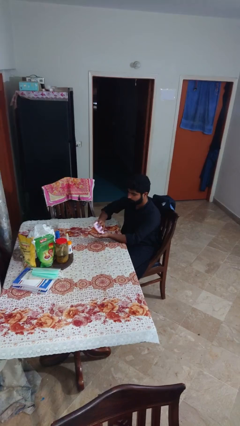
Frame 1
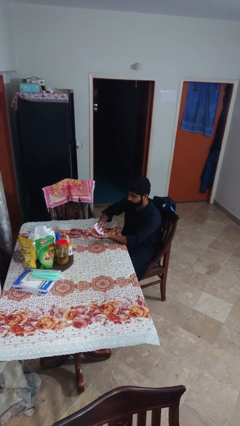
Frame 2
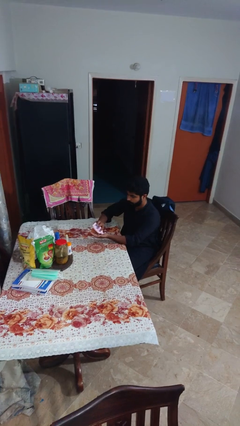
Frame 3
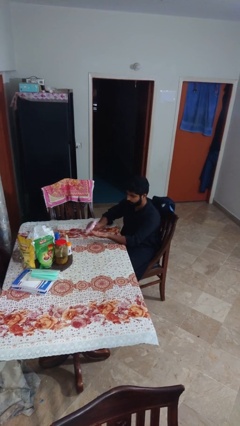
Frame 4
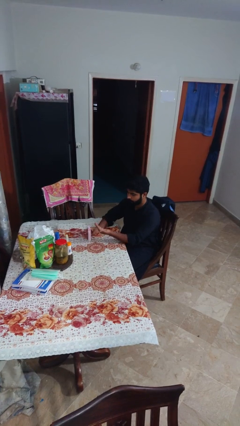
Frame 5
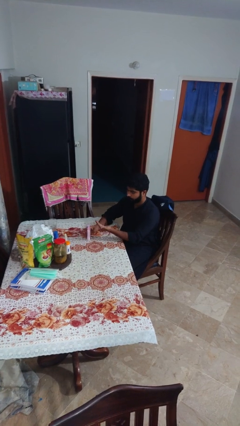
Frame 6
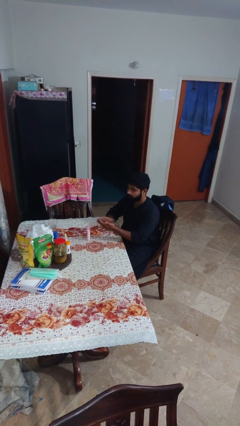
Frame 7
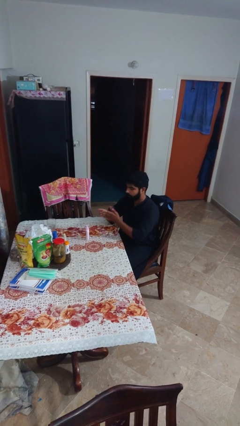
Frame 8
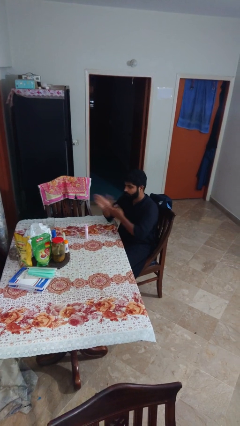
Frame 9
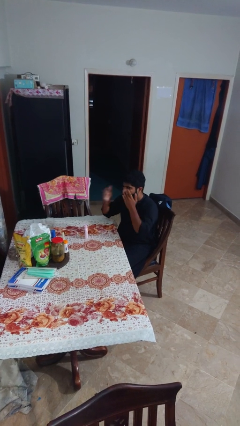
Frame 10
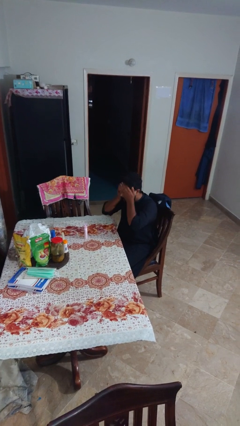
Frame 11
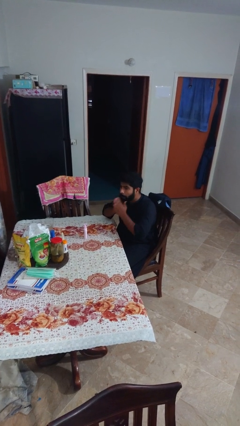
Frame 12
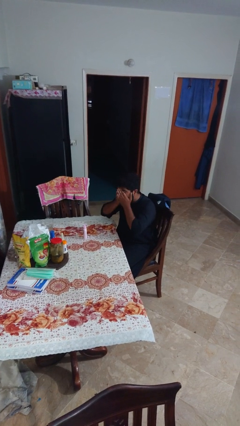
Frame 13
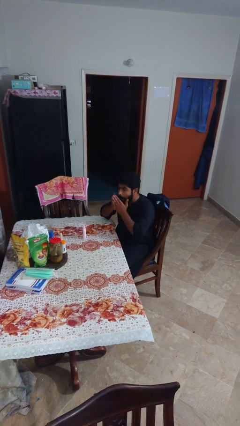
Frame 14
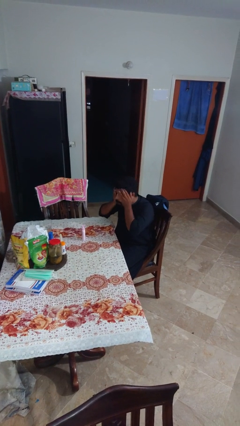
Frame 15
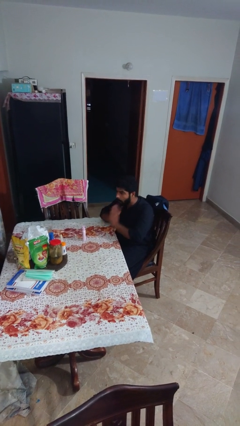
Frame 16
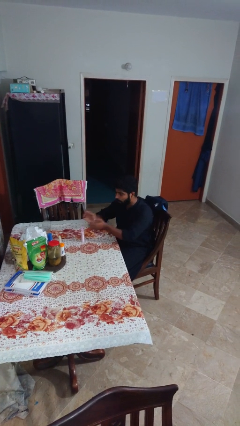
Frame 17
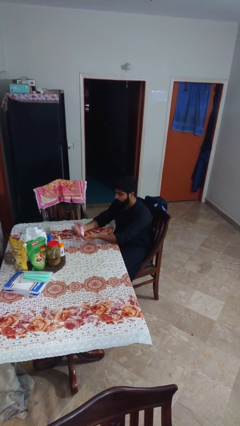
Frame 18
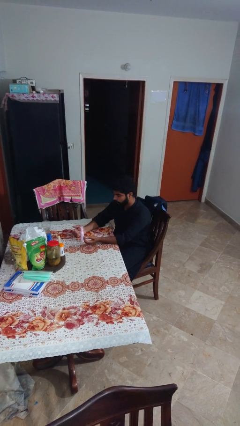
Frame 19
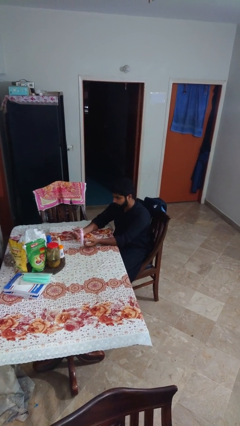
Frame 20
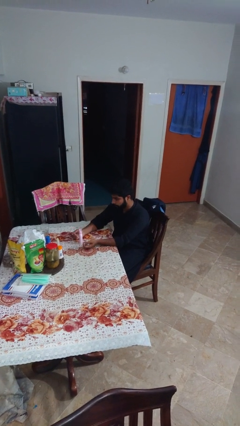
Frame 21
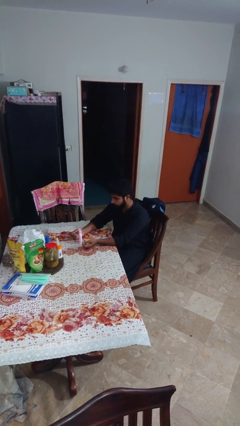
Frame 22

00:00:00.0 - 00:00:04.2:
person applies facial moisturizer

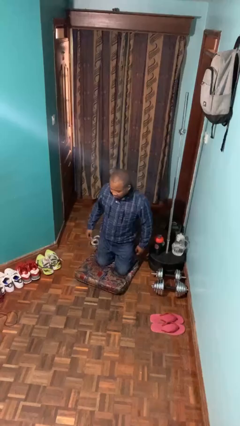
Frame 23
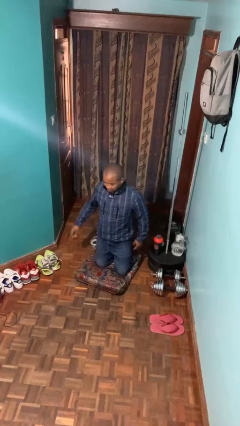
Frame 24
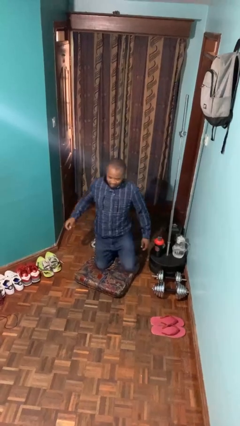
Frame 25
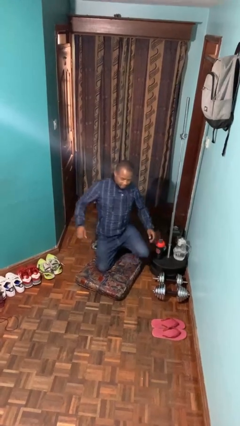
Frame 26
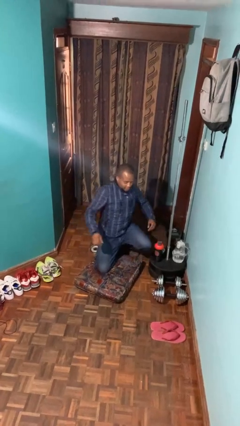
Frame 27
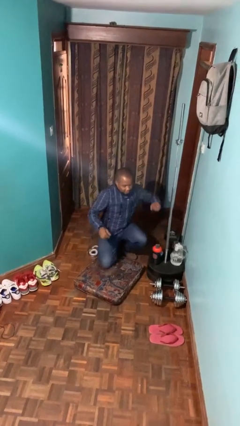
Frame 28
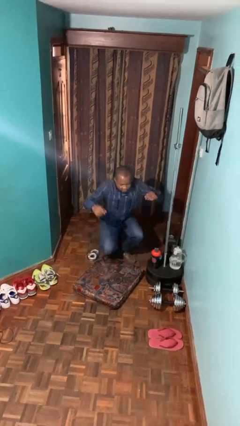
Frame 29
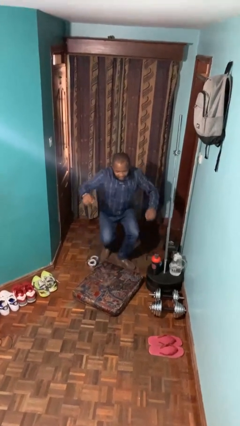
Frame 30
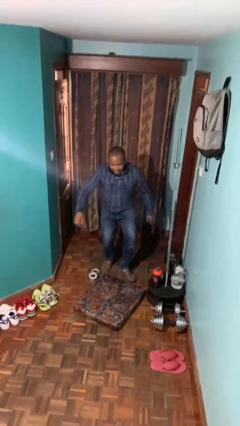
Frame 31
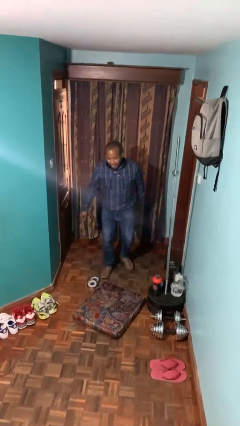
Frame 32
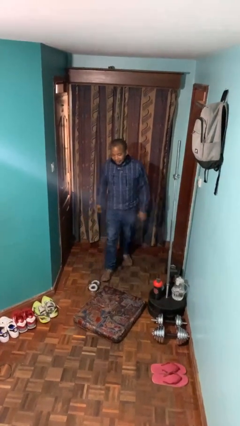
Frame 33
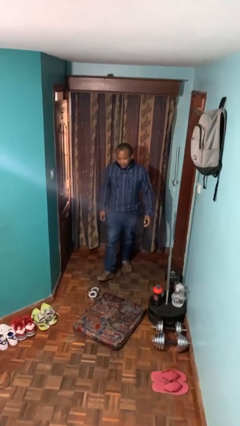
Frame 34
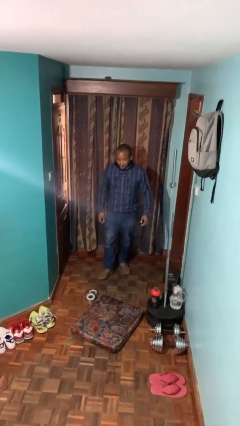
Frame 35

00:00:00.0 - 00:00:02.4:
person stands up from floor

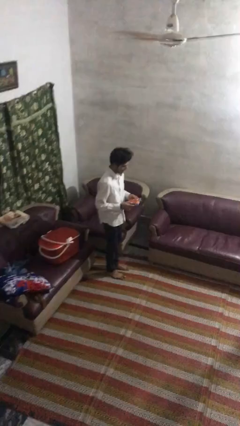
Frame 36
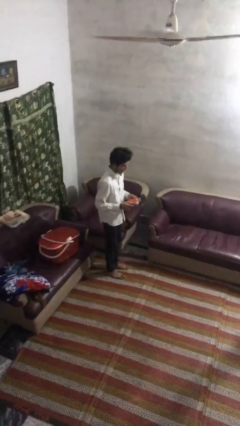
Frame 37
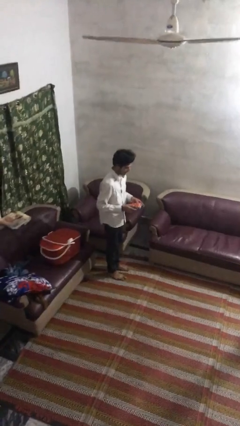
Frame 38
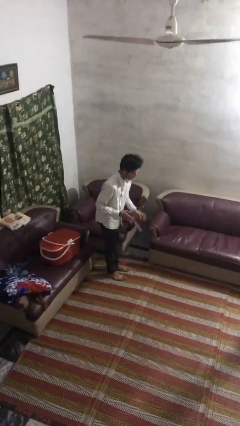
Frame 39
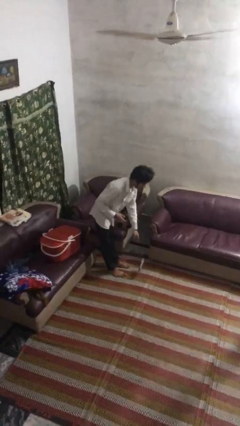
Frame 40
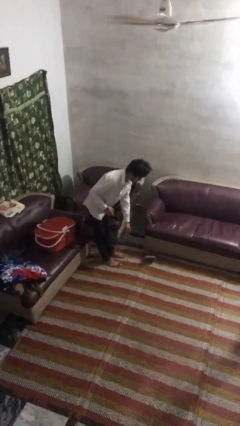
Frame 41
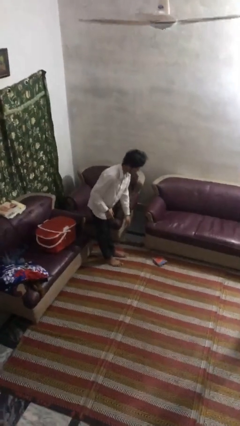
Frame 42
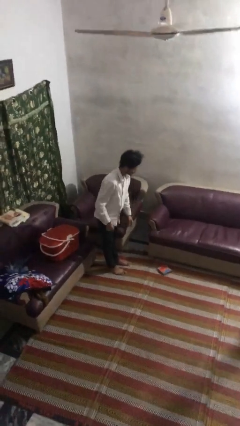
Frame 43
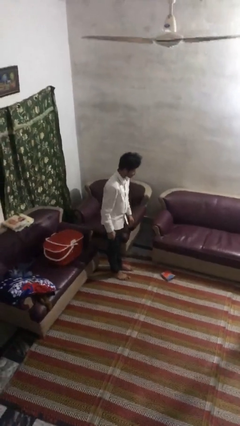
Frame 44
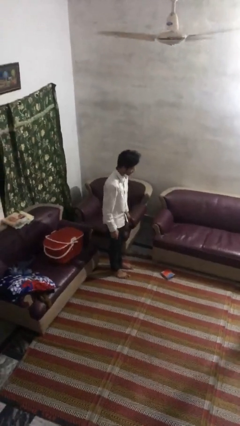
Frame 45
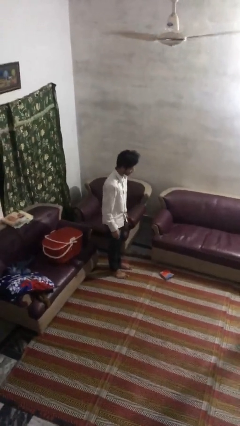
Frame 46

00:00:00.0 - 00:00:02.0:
person drops object

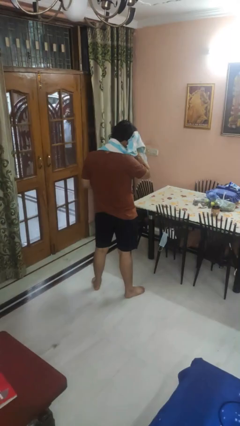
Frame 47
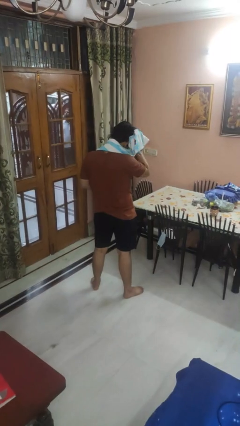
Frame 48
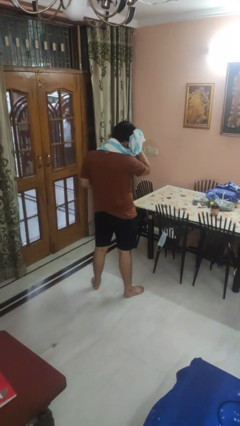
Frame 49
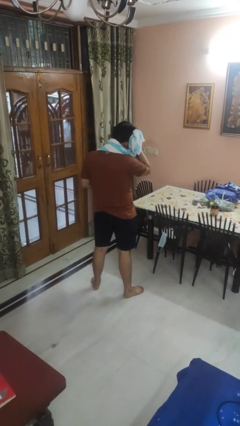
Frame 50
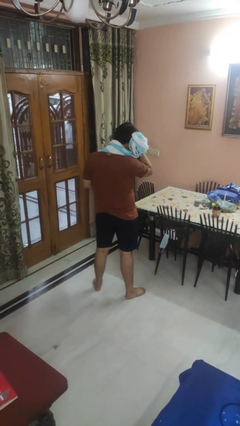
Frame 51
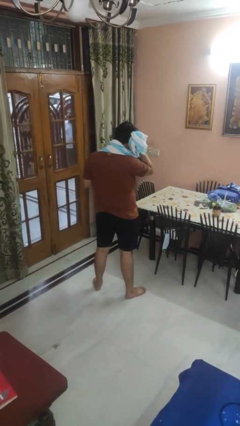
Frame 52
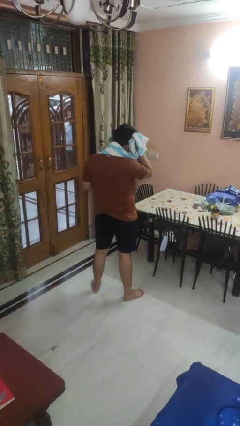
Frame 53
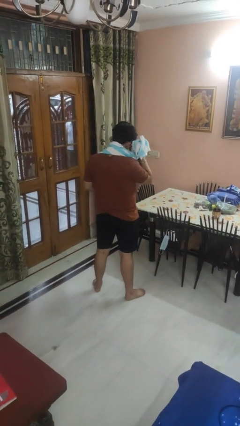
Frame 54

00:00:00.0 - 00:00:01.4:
person dries hair with towel

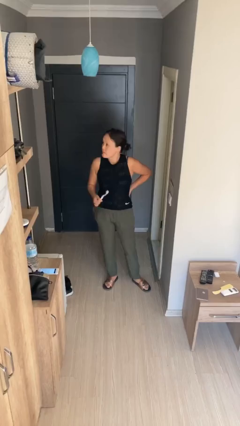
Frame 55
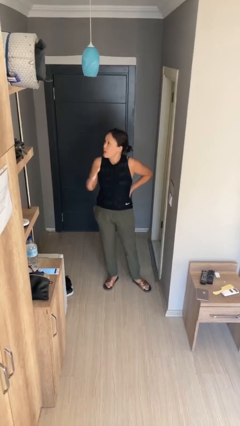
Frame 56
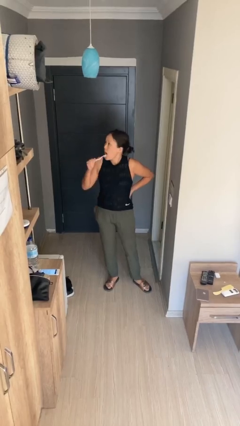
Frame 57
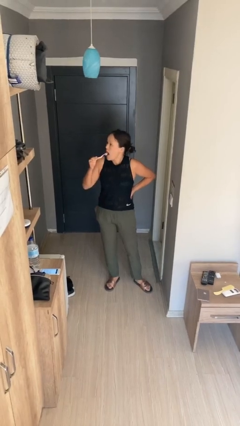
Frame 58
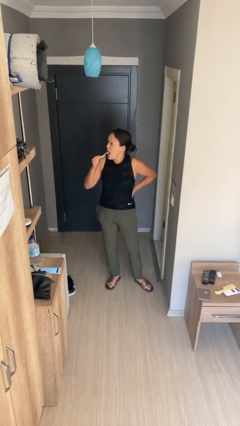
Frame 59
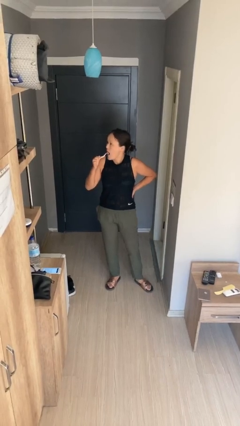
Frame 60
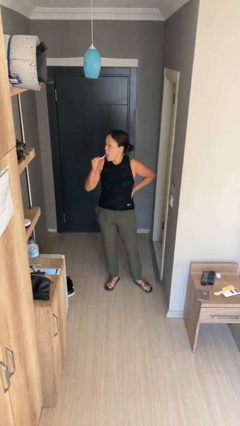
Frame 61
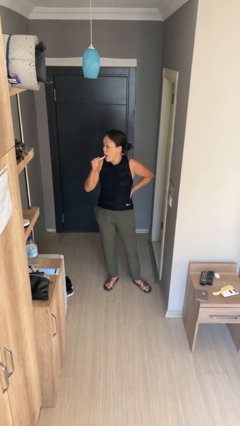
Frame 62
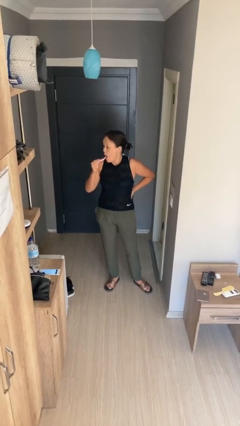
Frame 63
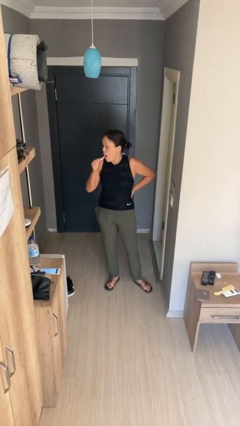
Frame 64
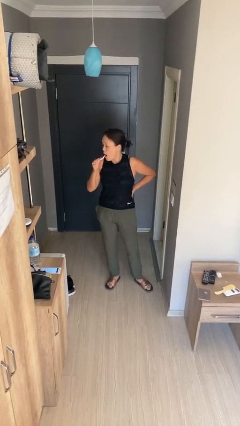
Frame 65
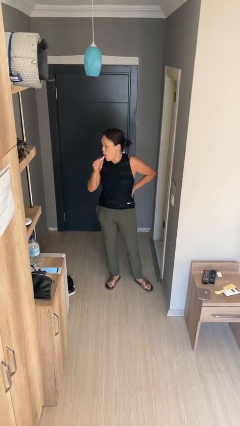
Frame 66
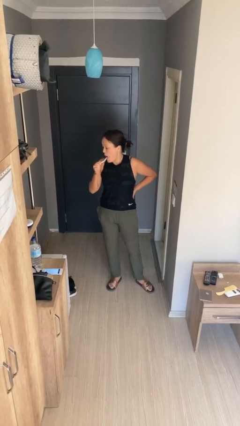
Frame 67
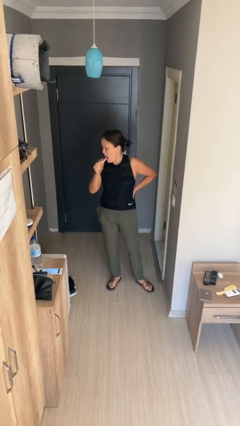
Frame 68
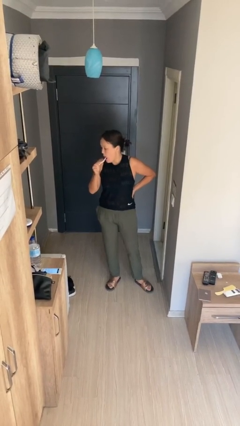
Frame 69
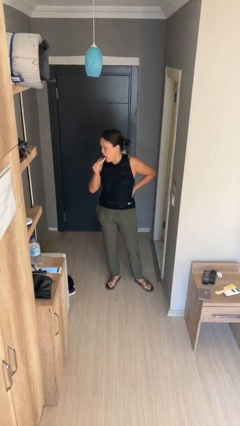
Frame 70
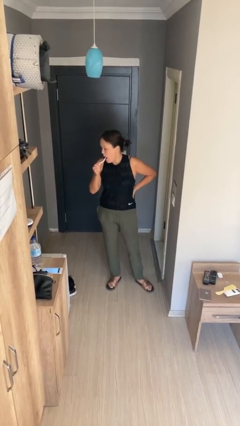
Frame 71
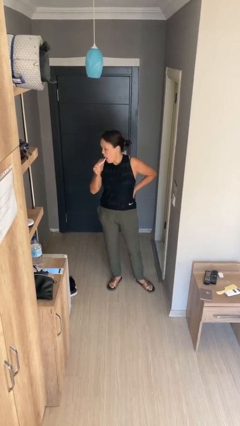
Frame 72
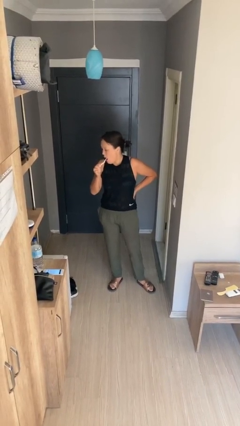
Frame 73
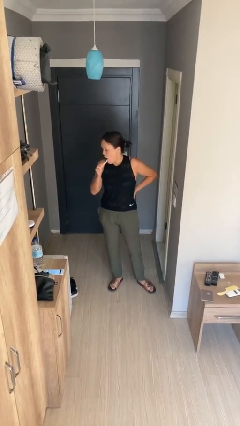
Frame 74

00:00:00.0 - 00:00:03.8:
person brushes teeth

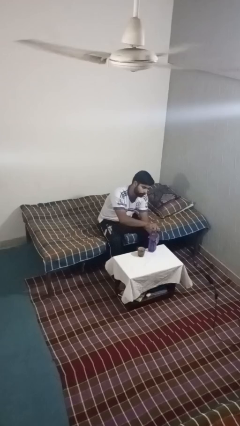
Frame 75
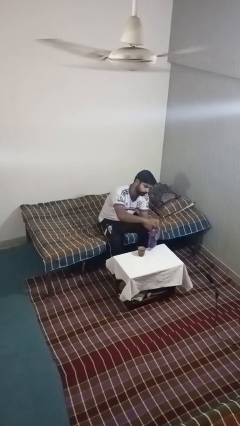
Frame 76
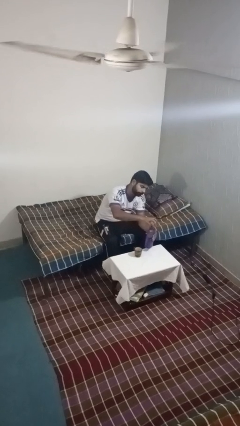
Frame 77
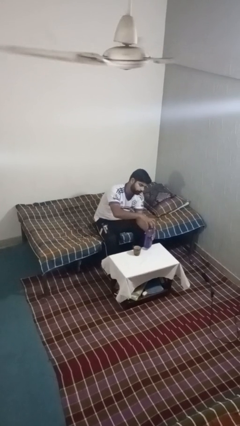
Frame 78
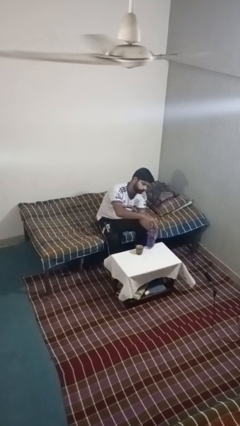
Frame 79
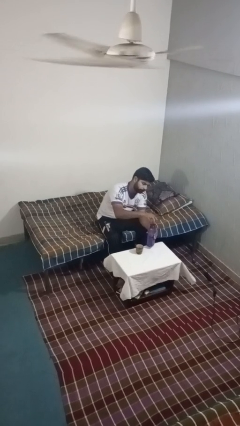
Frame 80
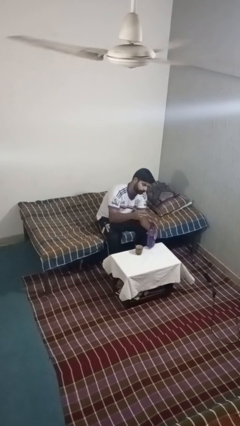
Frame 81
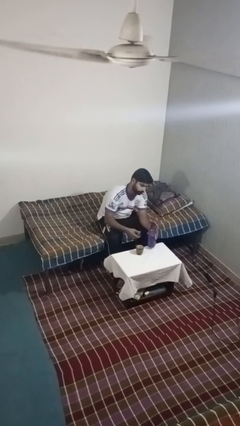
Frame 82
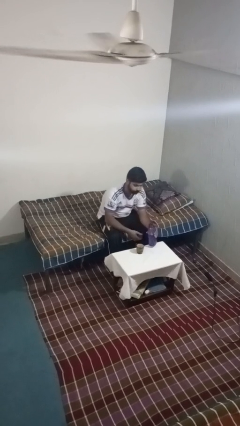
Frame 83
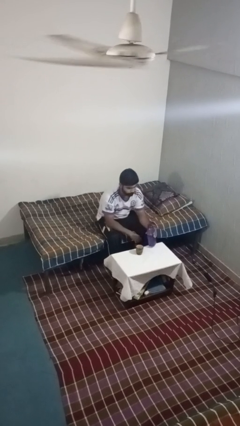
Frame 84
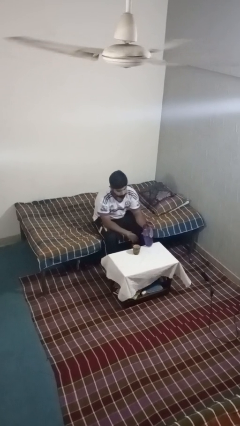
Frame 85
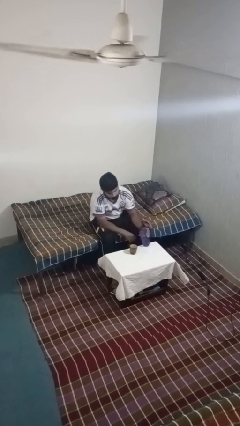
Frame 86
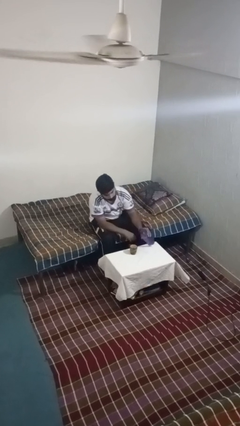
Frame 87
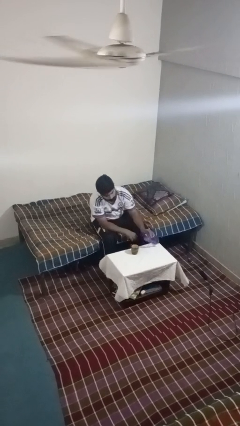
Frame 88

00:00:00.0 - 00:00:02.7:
person unscrews lid from bottle

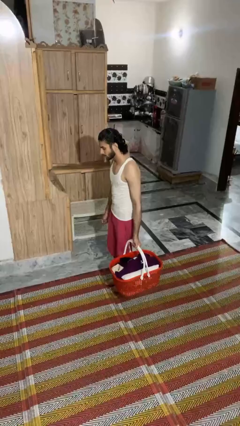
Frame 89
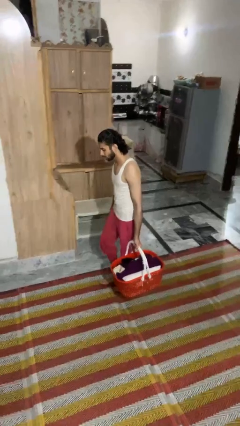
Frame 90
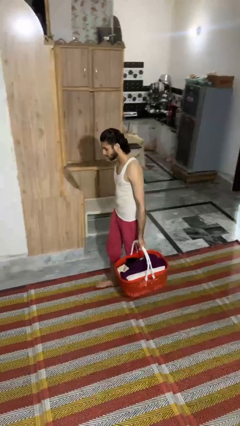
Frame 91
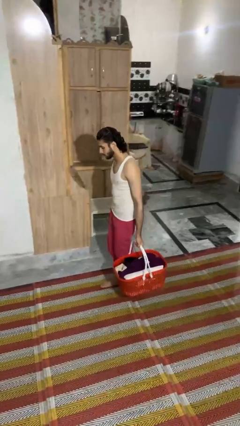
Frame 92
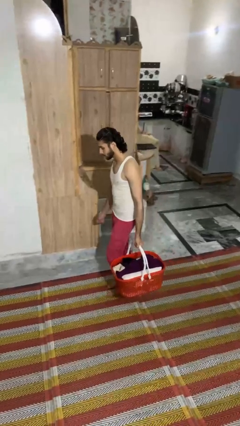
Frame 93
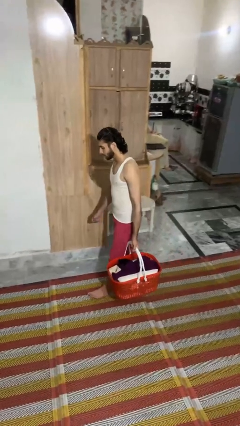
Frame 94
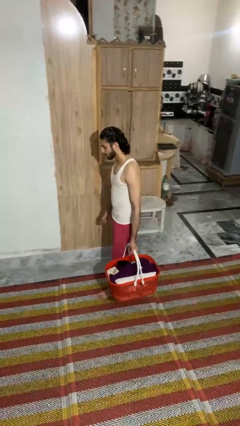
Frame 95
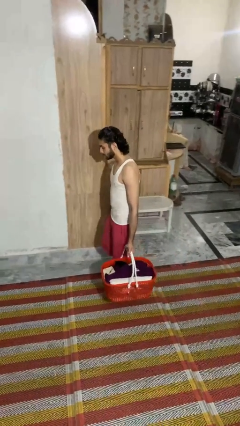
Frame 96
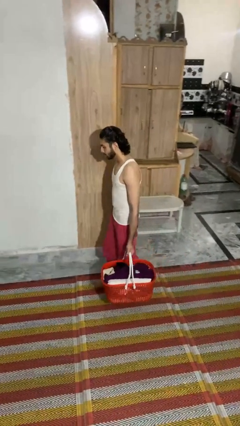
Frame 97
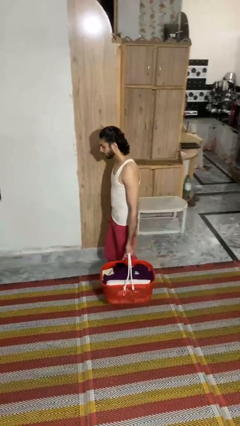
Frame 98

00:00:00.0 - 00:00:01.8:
person carries laundry basket
